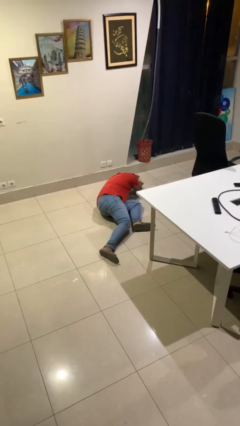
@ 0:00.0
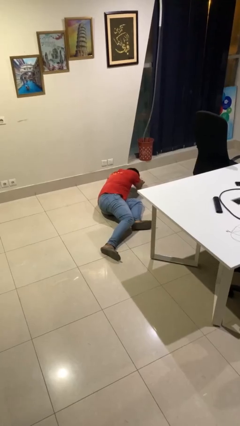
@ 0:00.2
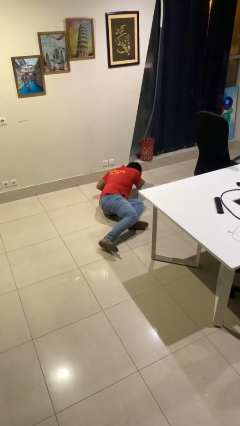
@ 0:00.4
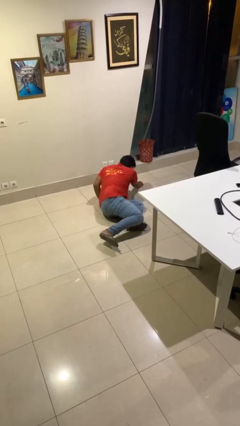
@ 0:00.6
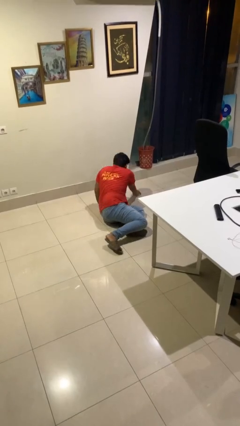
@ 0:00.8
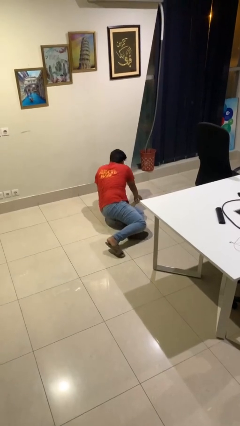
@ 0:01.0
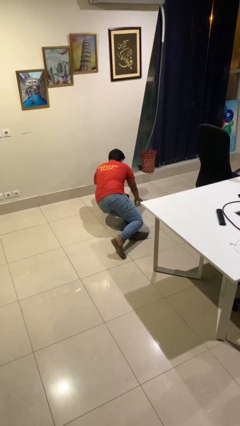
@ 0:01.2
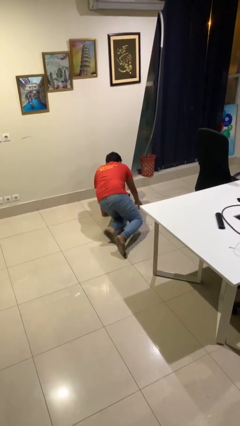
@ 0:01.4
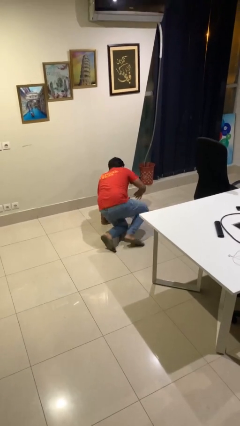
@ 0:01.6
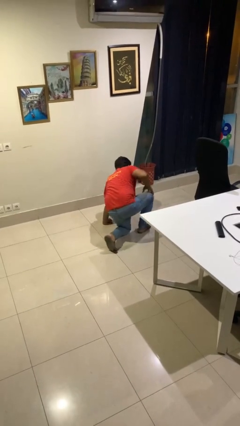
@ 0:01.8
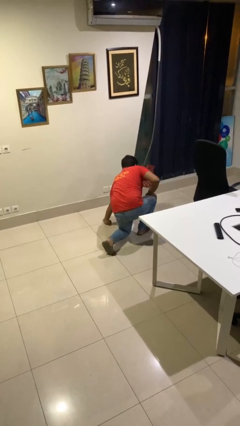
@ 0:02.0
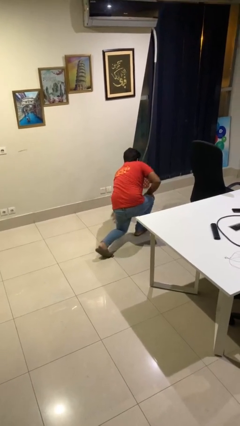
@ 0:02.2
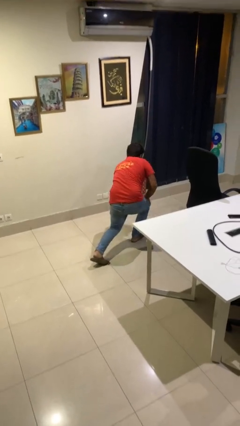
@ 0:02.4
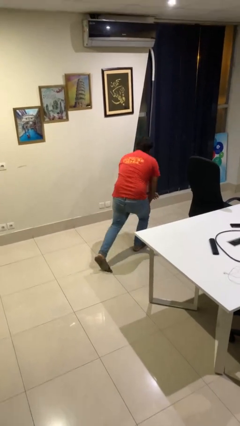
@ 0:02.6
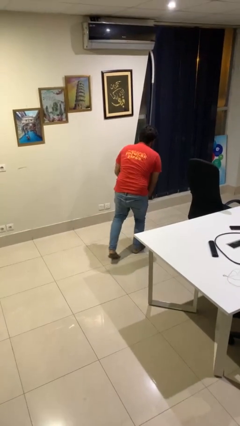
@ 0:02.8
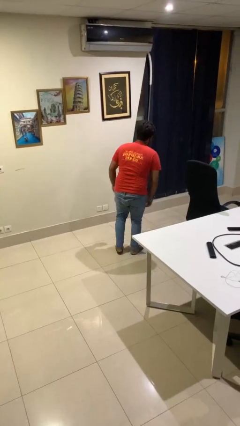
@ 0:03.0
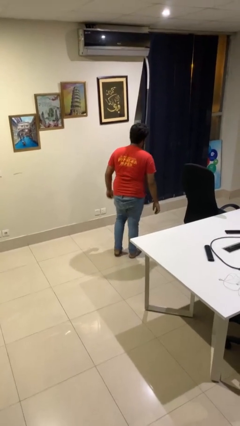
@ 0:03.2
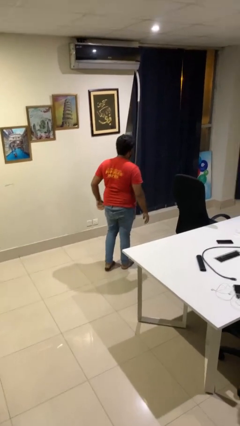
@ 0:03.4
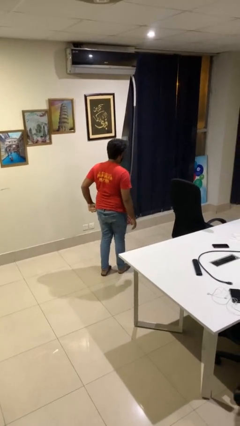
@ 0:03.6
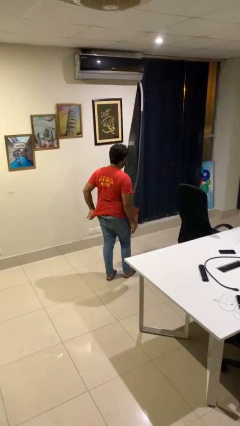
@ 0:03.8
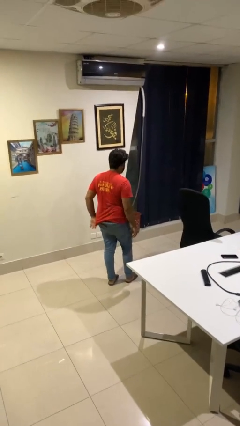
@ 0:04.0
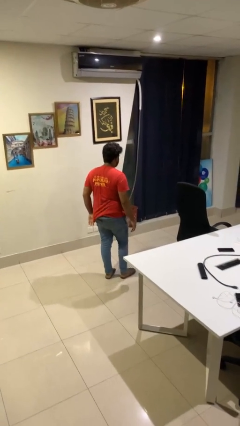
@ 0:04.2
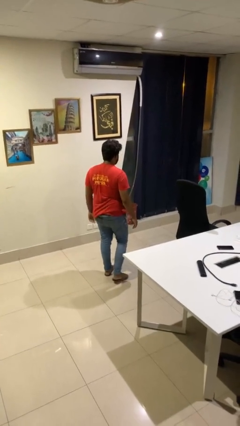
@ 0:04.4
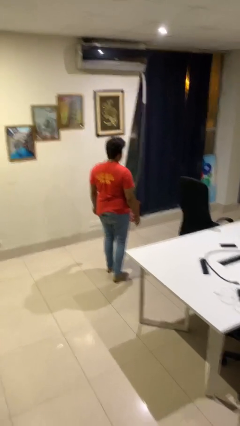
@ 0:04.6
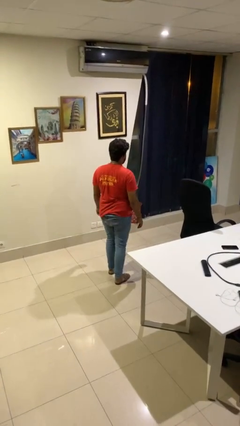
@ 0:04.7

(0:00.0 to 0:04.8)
person stands up from floor

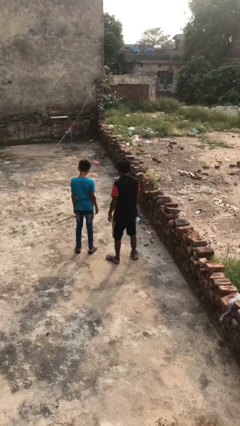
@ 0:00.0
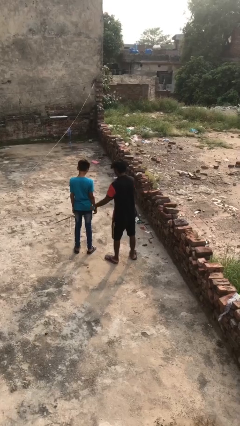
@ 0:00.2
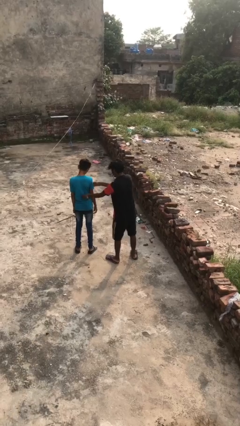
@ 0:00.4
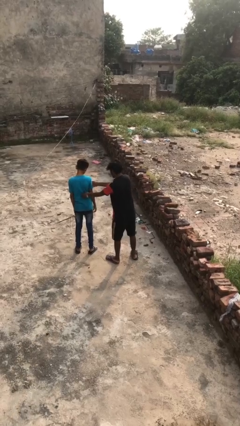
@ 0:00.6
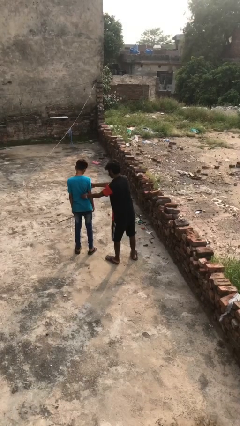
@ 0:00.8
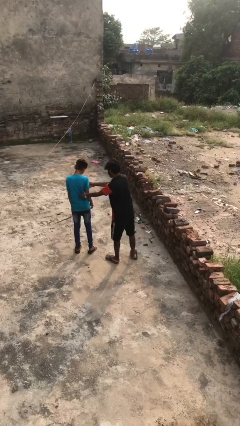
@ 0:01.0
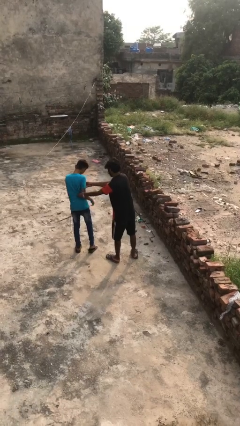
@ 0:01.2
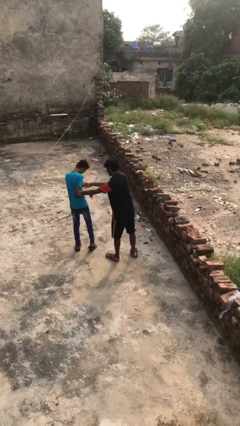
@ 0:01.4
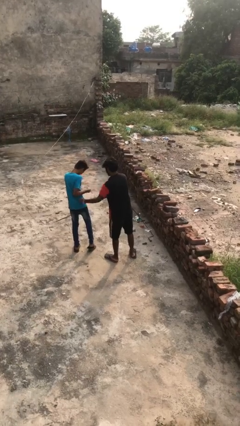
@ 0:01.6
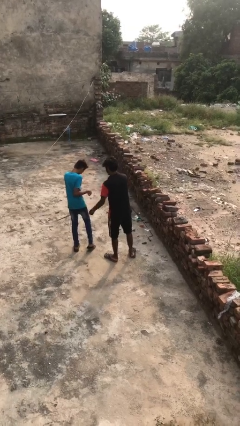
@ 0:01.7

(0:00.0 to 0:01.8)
person tickles person

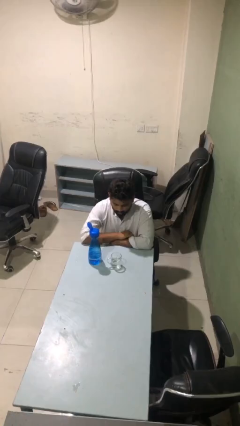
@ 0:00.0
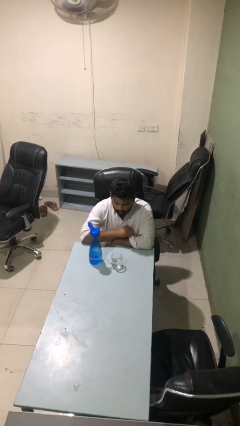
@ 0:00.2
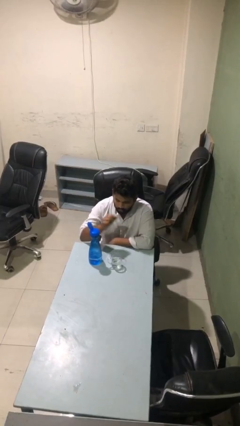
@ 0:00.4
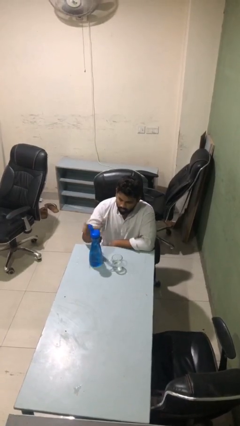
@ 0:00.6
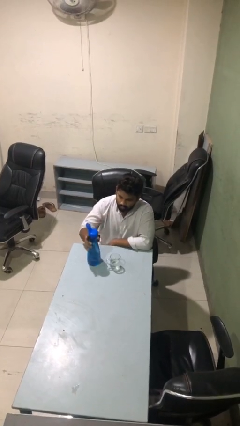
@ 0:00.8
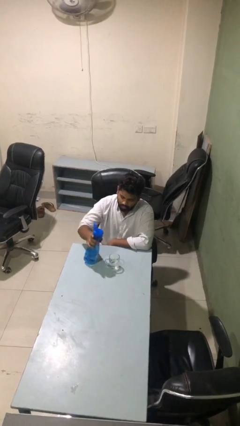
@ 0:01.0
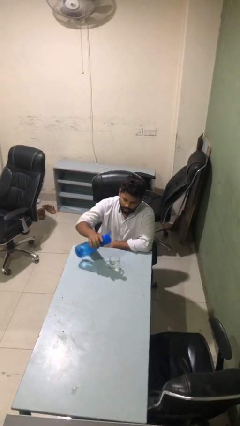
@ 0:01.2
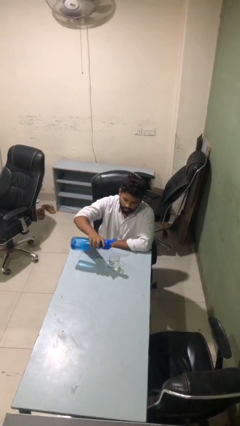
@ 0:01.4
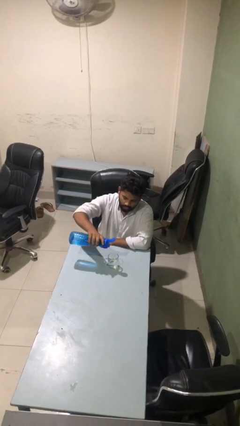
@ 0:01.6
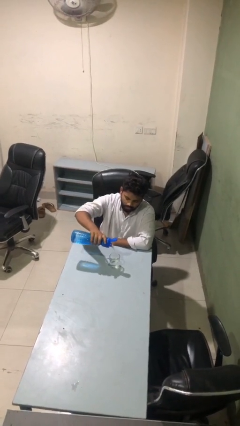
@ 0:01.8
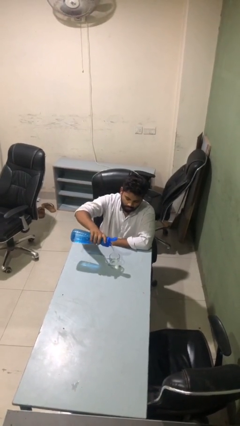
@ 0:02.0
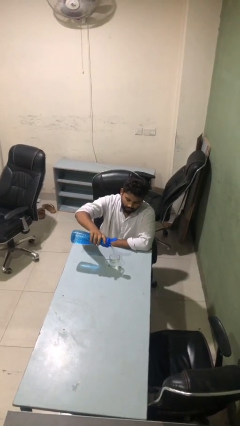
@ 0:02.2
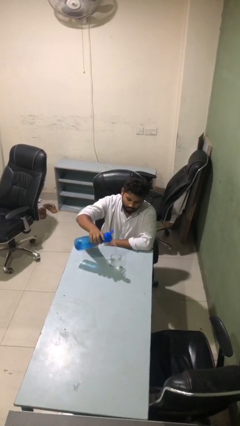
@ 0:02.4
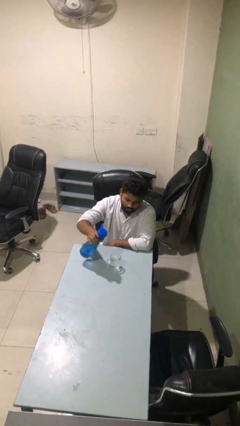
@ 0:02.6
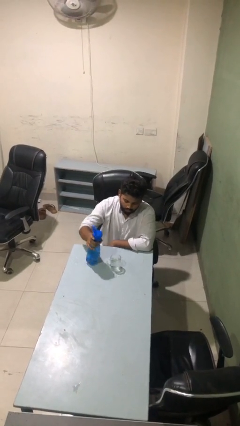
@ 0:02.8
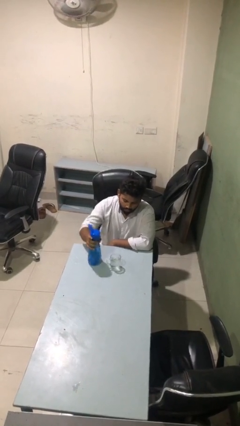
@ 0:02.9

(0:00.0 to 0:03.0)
person pours liquid into cup

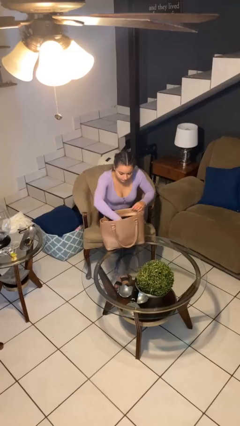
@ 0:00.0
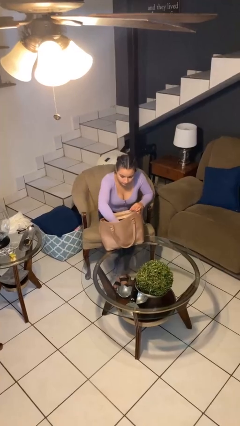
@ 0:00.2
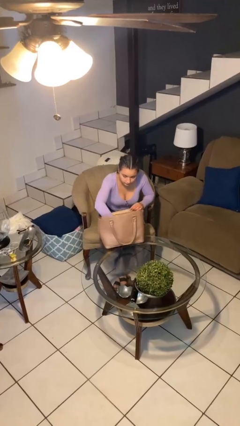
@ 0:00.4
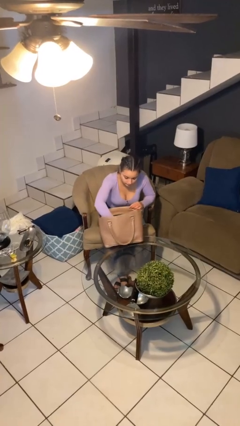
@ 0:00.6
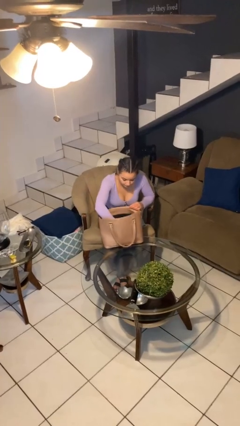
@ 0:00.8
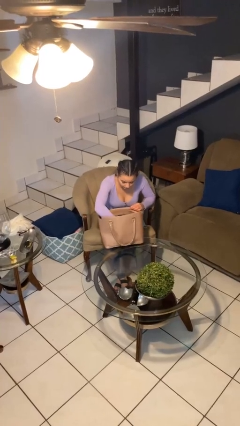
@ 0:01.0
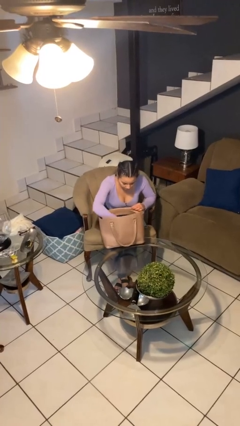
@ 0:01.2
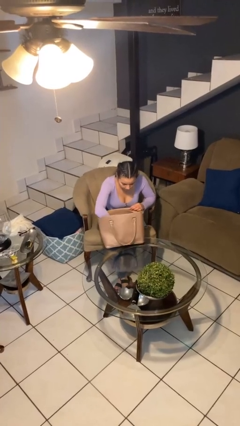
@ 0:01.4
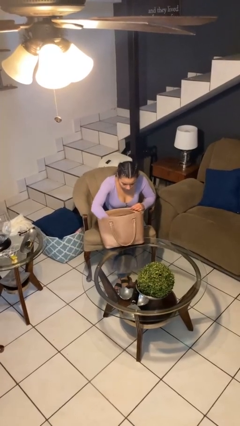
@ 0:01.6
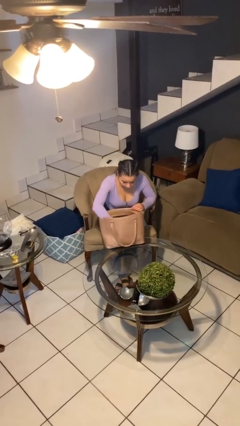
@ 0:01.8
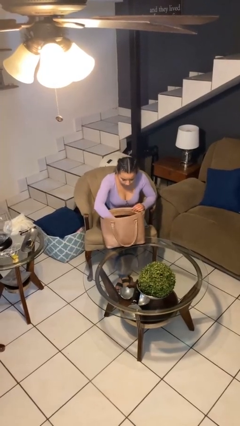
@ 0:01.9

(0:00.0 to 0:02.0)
person searches in purse

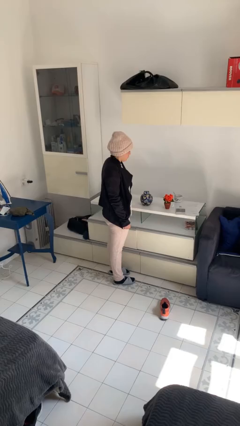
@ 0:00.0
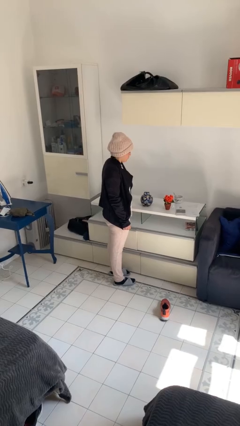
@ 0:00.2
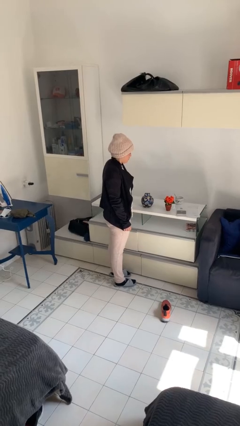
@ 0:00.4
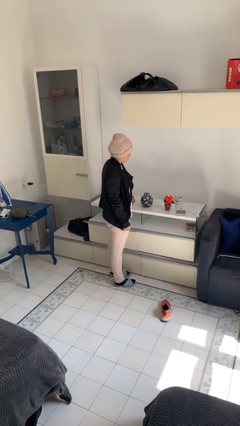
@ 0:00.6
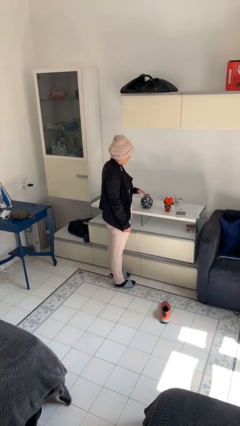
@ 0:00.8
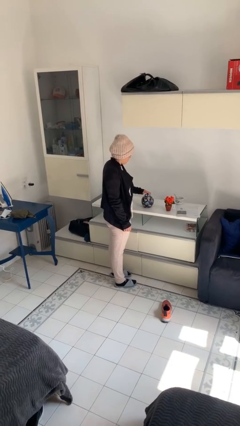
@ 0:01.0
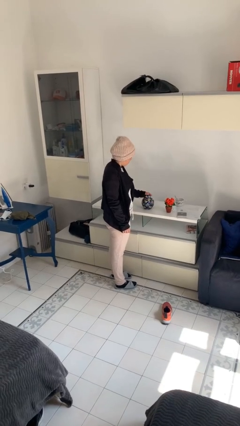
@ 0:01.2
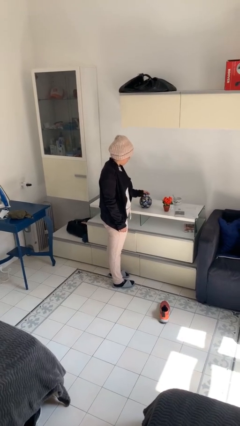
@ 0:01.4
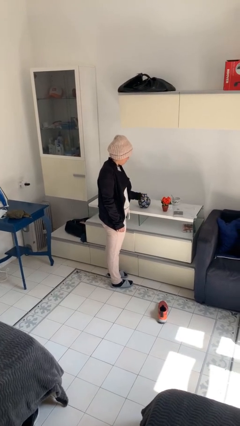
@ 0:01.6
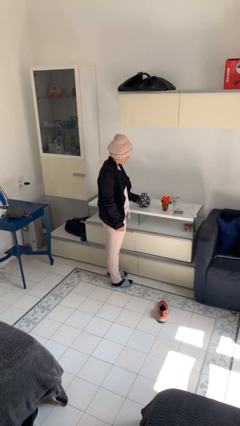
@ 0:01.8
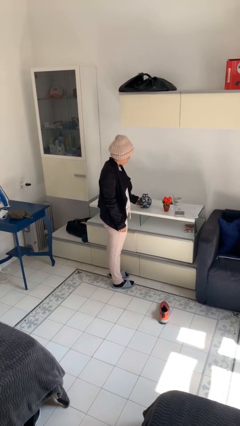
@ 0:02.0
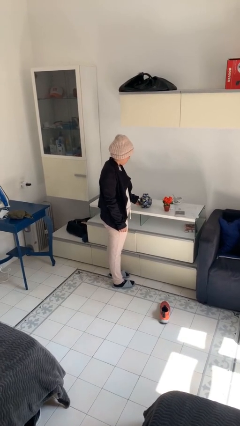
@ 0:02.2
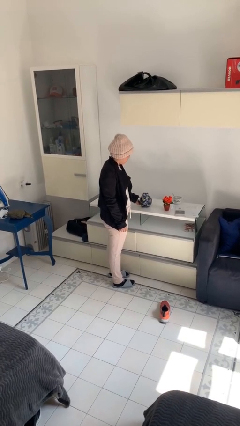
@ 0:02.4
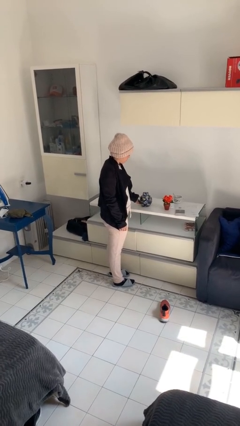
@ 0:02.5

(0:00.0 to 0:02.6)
person waves hand over object

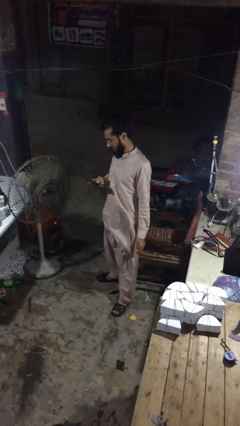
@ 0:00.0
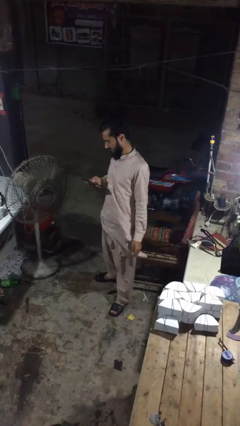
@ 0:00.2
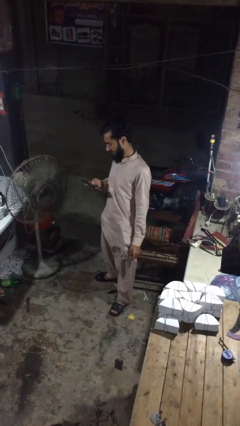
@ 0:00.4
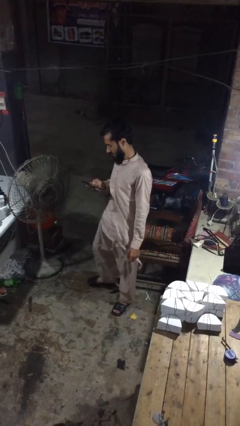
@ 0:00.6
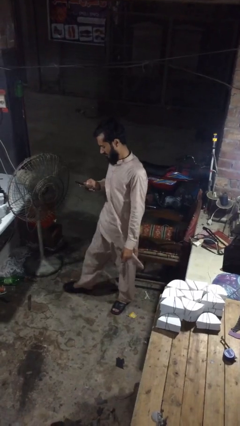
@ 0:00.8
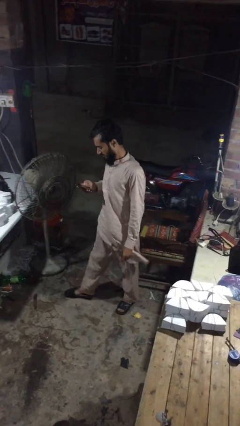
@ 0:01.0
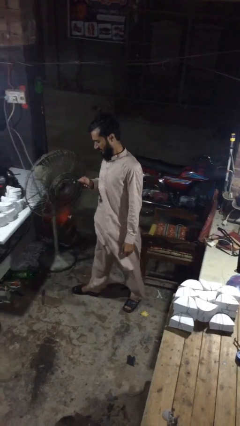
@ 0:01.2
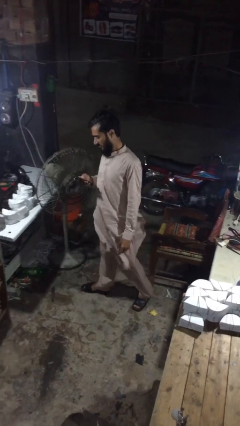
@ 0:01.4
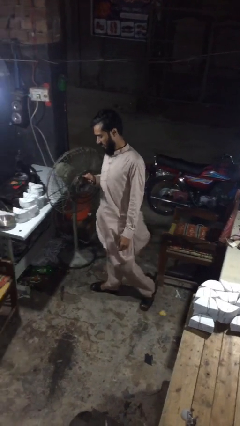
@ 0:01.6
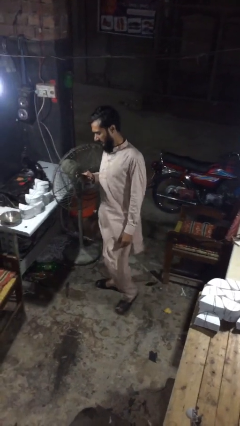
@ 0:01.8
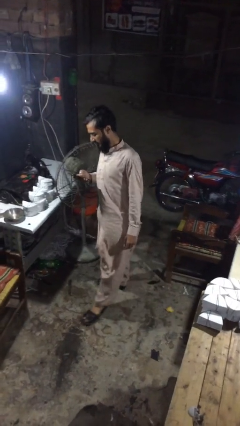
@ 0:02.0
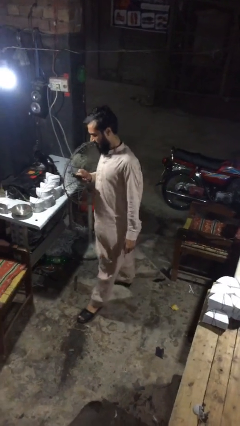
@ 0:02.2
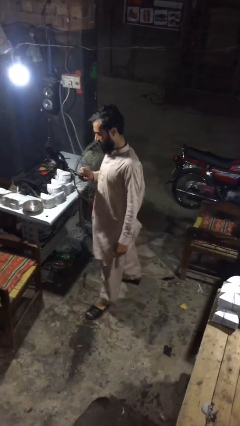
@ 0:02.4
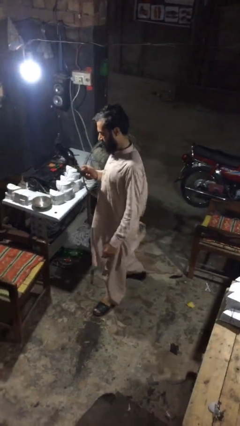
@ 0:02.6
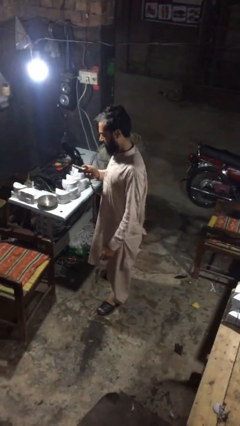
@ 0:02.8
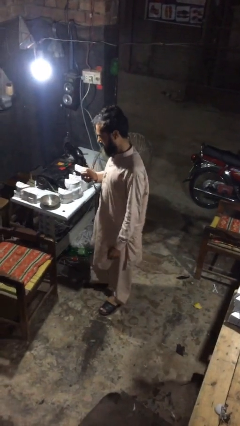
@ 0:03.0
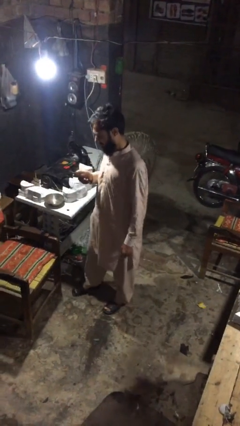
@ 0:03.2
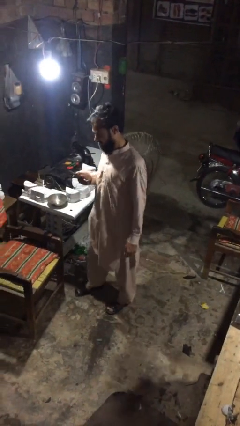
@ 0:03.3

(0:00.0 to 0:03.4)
person texts on phone
